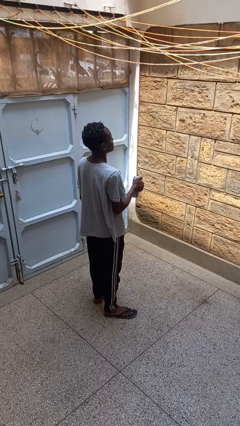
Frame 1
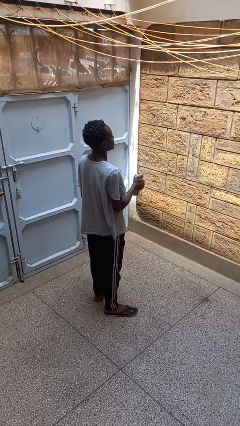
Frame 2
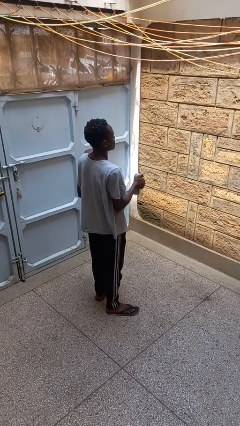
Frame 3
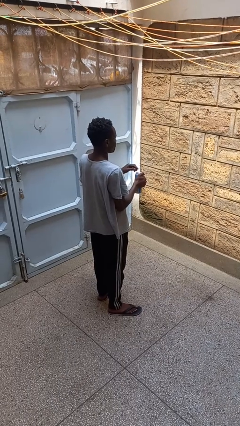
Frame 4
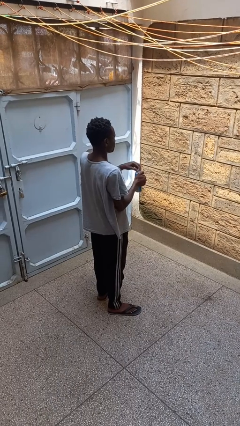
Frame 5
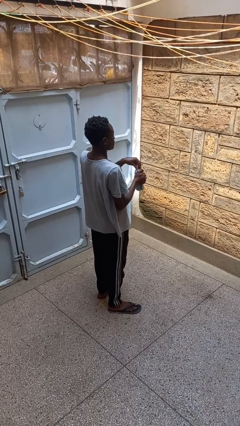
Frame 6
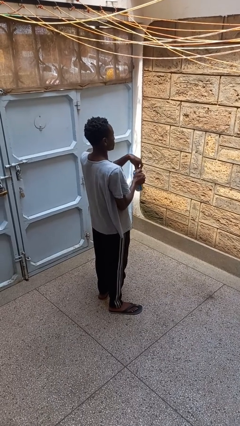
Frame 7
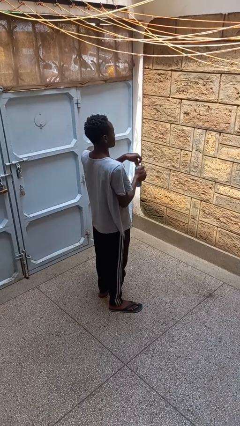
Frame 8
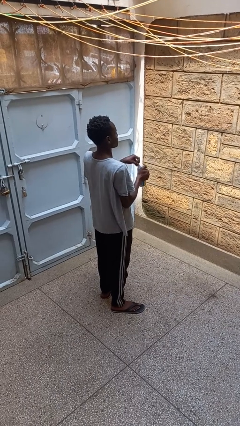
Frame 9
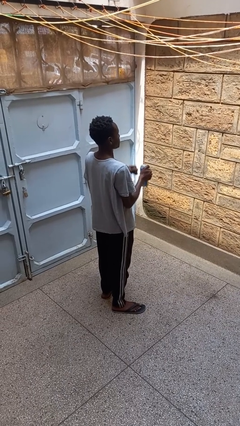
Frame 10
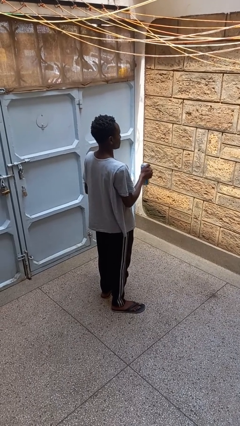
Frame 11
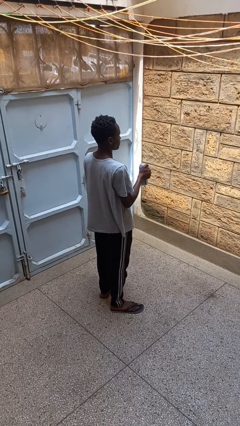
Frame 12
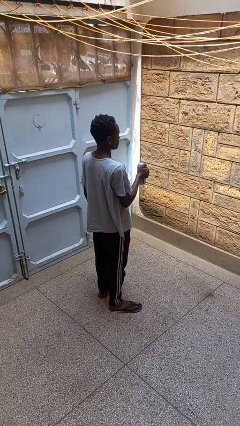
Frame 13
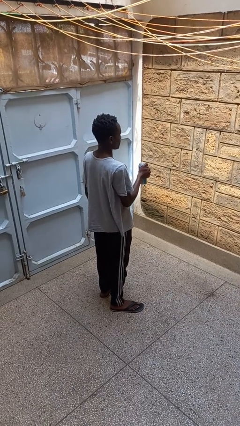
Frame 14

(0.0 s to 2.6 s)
person opens beverage can

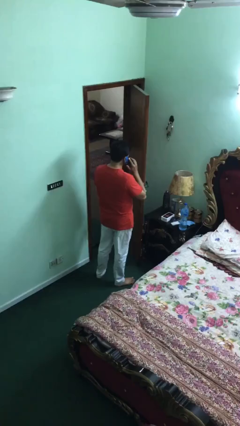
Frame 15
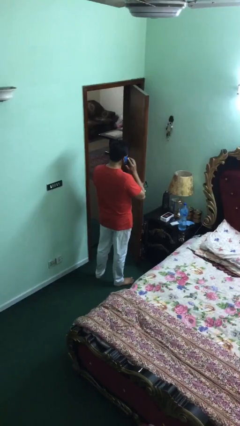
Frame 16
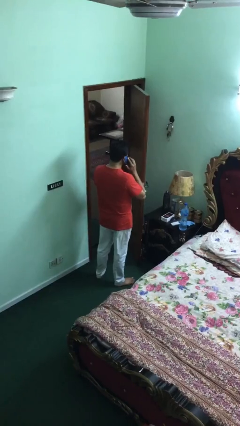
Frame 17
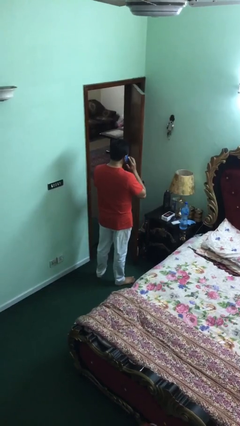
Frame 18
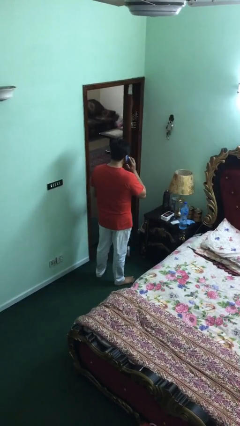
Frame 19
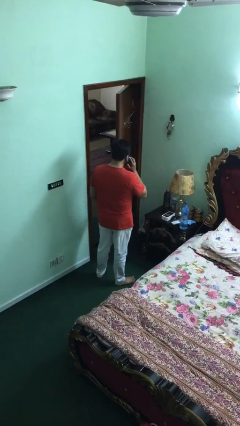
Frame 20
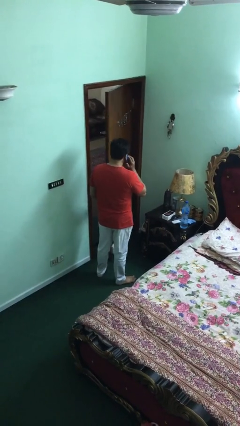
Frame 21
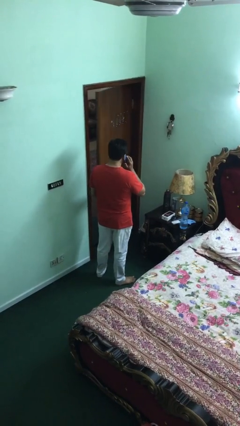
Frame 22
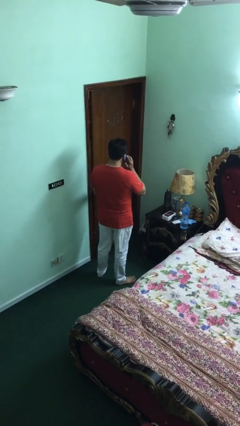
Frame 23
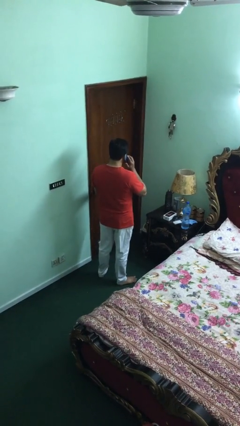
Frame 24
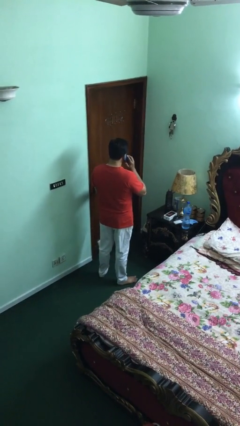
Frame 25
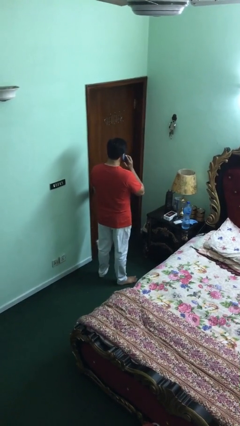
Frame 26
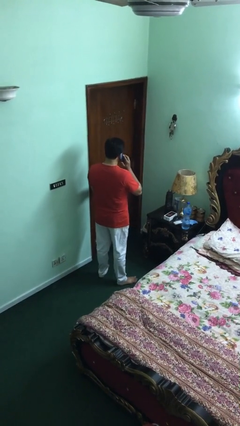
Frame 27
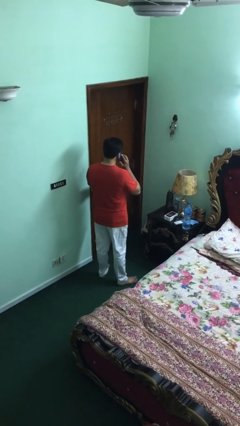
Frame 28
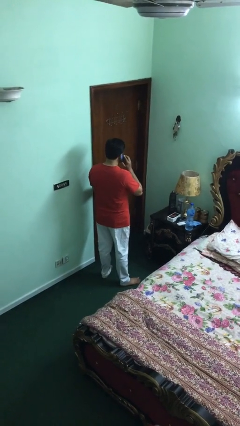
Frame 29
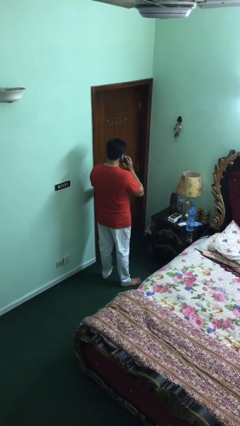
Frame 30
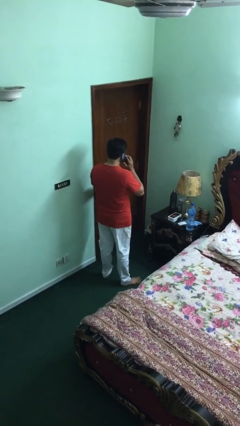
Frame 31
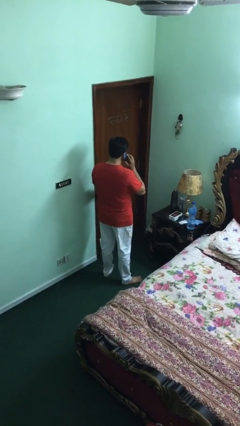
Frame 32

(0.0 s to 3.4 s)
person closes facility door

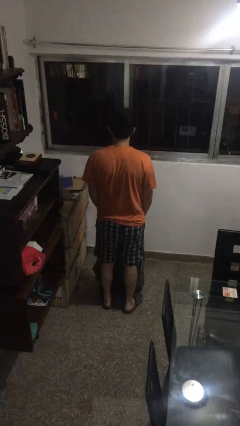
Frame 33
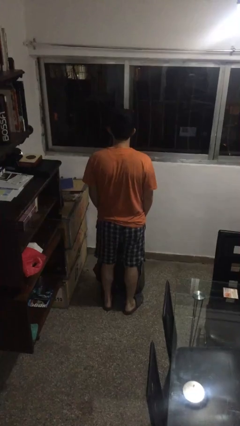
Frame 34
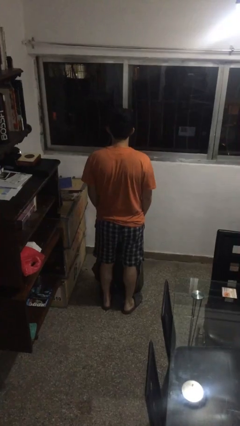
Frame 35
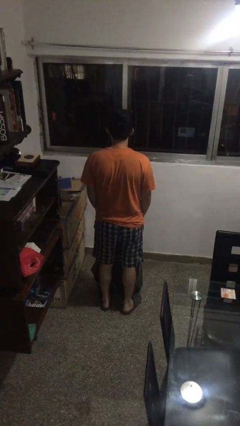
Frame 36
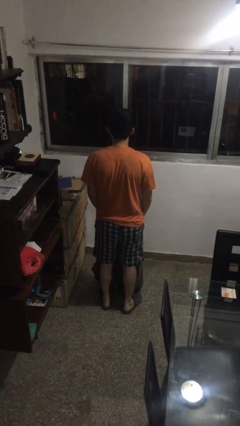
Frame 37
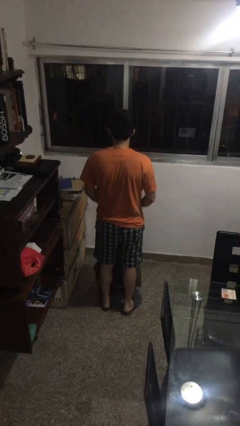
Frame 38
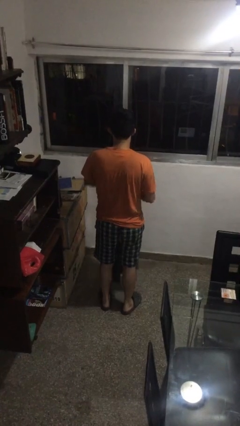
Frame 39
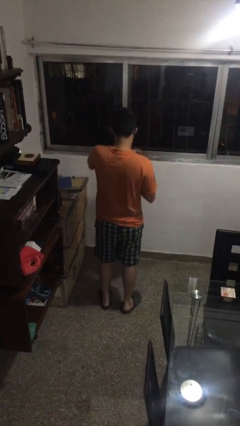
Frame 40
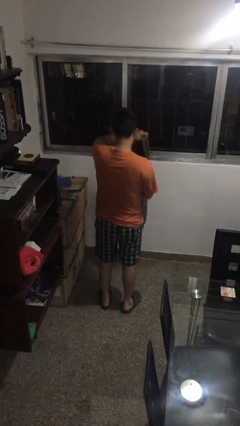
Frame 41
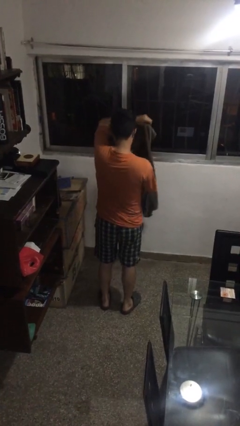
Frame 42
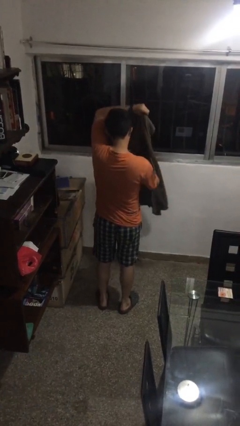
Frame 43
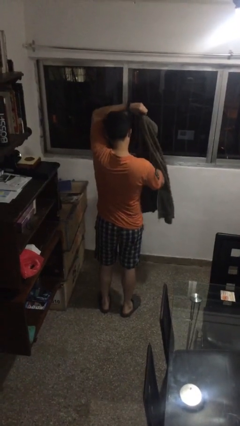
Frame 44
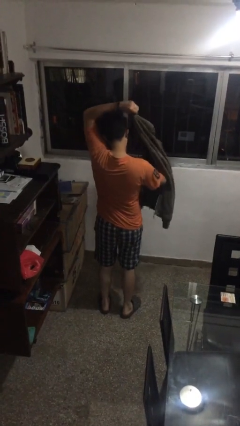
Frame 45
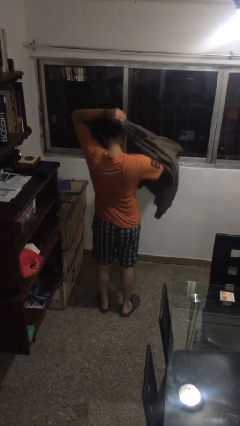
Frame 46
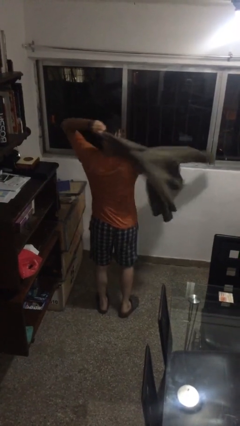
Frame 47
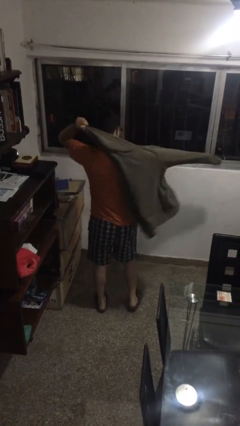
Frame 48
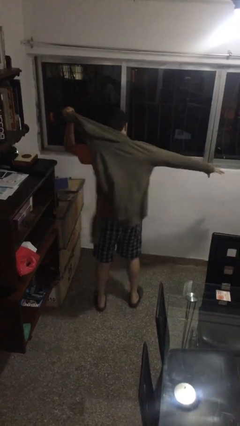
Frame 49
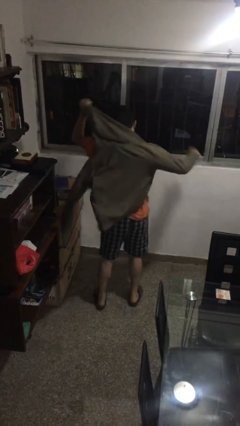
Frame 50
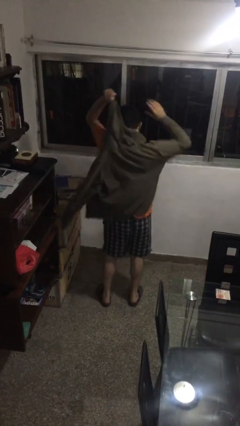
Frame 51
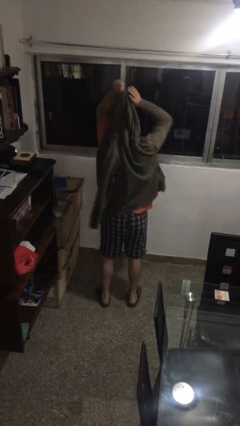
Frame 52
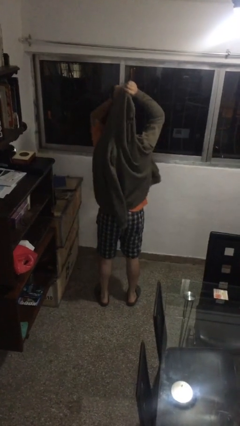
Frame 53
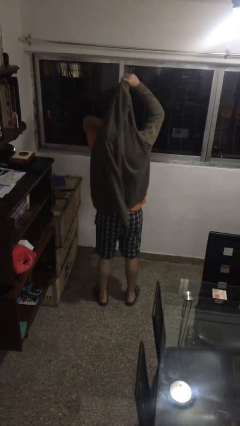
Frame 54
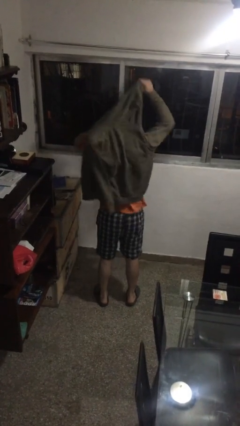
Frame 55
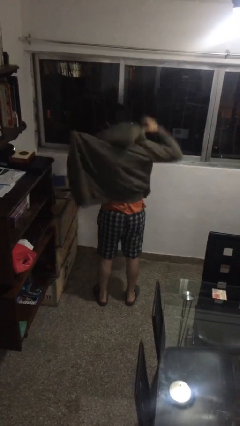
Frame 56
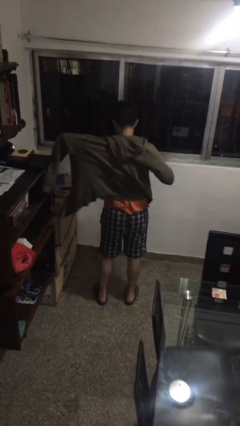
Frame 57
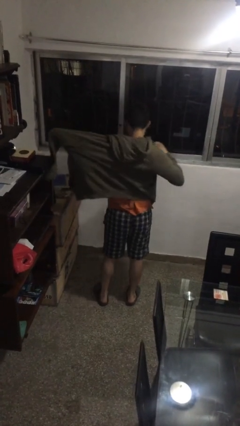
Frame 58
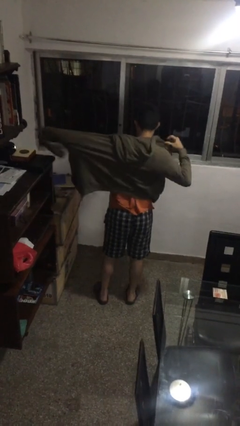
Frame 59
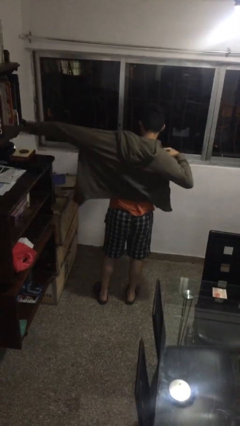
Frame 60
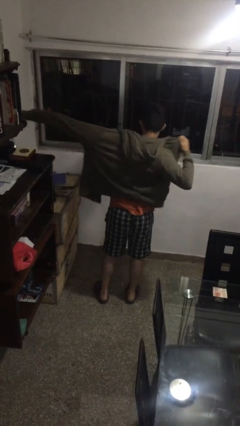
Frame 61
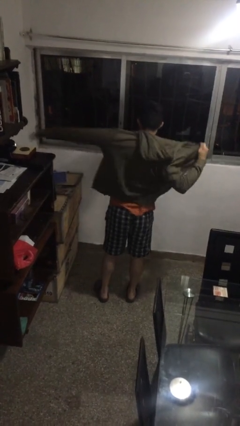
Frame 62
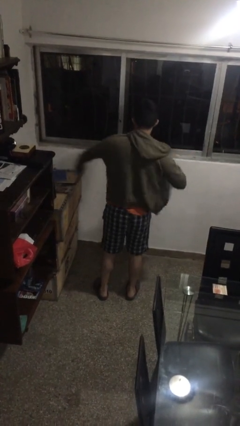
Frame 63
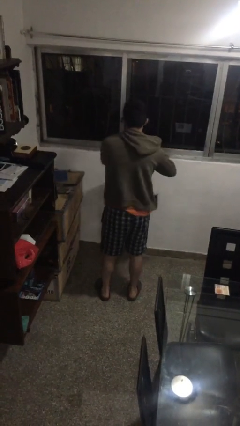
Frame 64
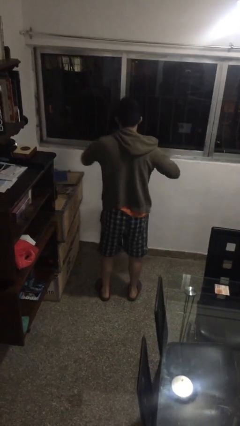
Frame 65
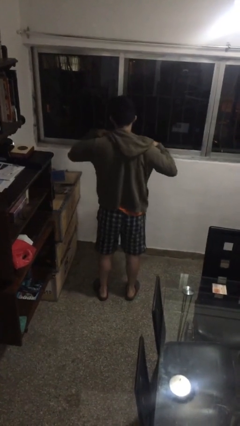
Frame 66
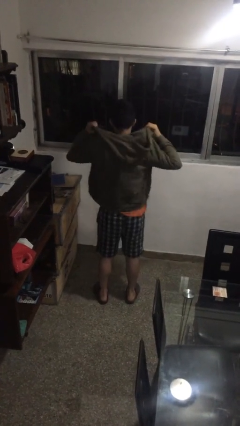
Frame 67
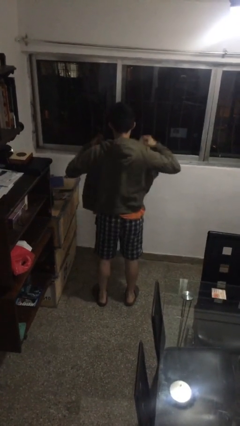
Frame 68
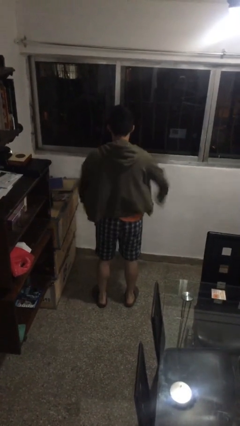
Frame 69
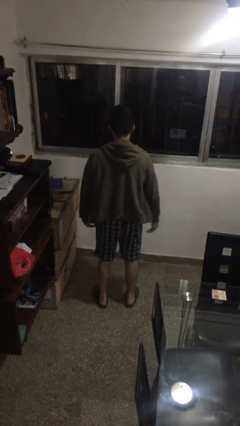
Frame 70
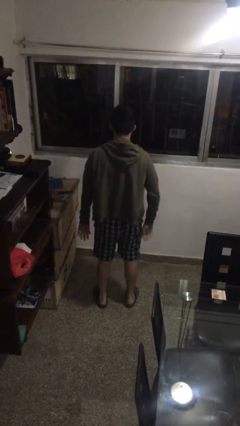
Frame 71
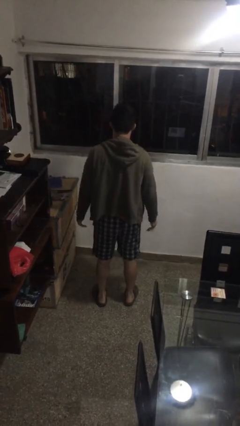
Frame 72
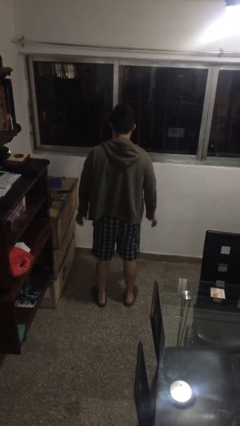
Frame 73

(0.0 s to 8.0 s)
person puts on jacket

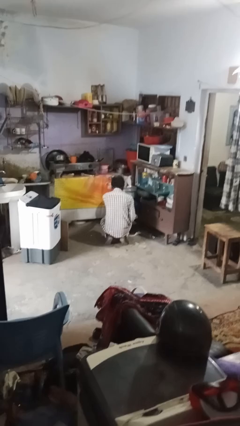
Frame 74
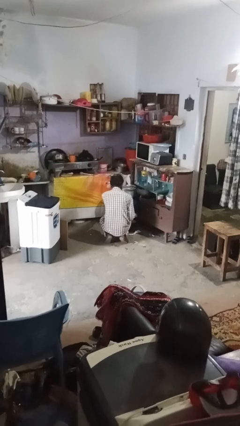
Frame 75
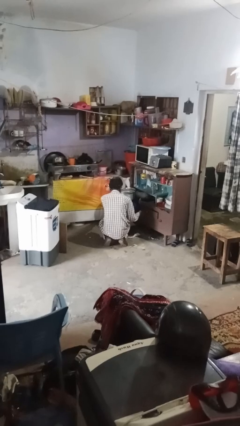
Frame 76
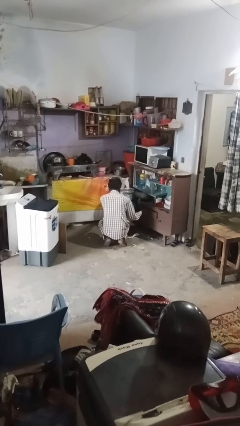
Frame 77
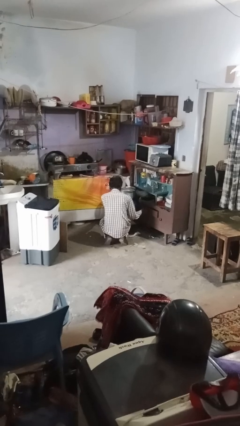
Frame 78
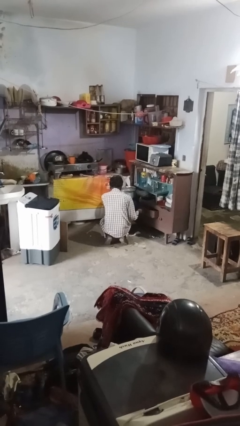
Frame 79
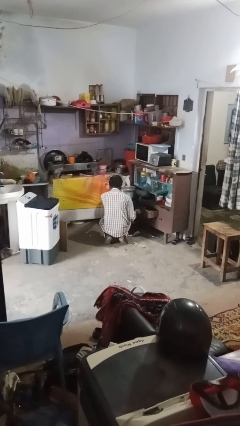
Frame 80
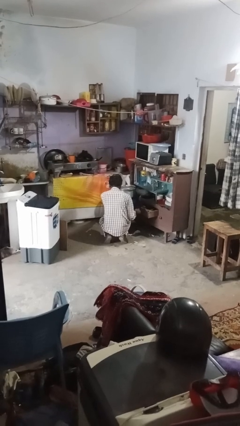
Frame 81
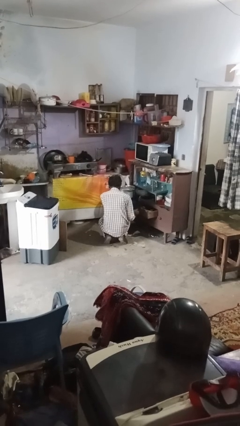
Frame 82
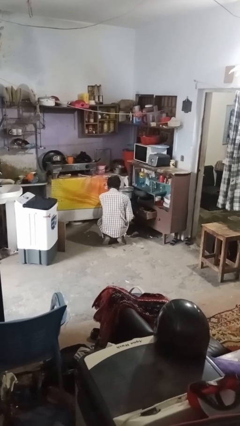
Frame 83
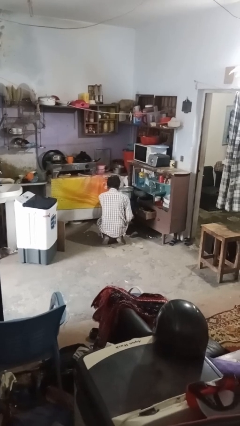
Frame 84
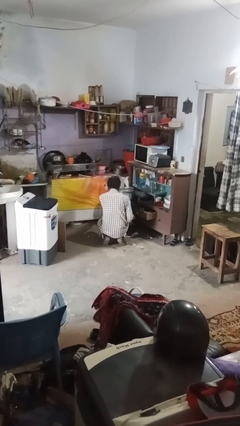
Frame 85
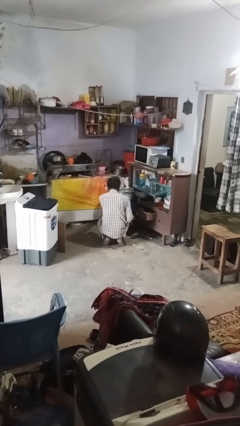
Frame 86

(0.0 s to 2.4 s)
person opens kitchen drawer

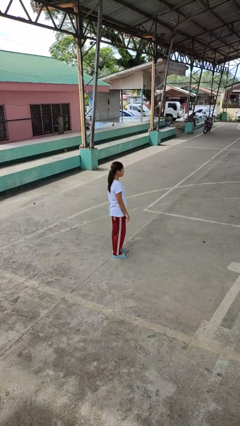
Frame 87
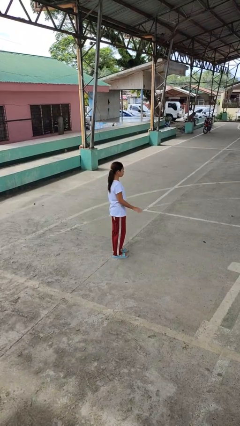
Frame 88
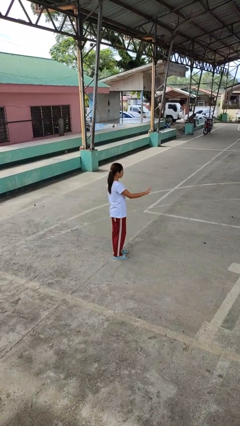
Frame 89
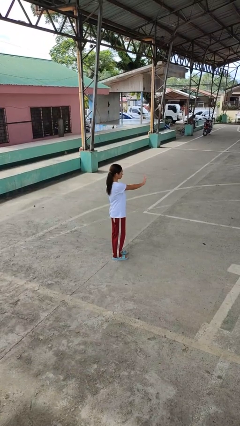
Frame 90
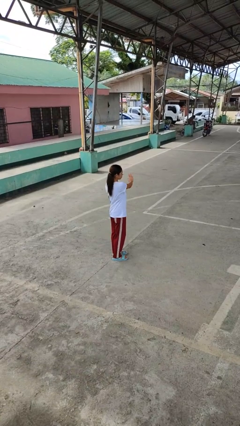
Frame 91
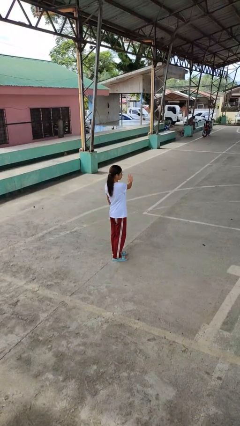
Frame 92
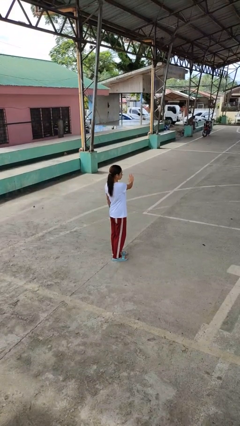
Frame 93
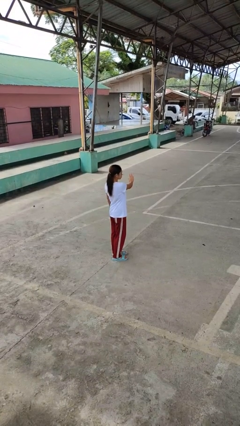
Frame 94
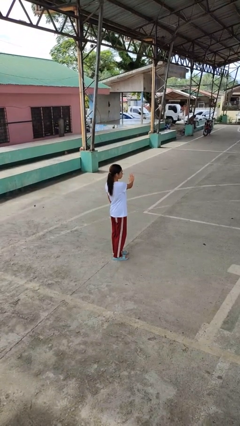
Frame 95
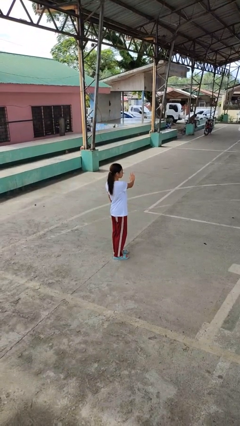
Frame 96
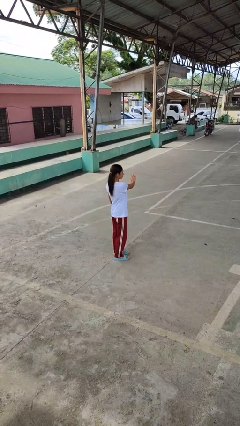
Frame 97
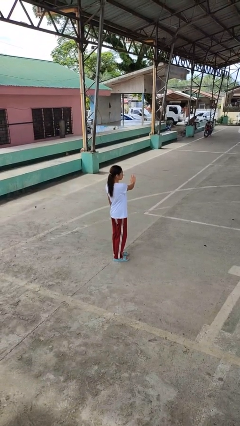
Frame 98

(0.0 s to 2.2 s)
person gestures swipe left
